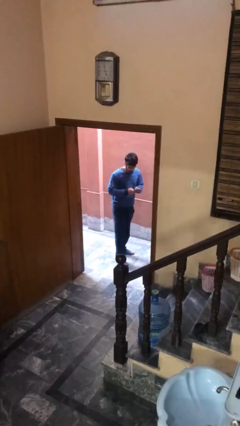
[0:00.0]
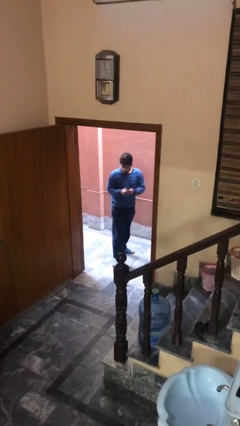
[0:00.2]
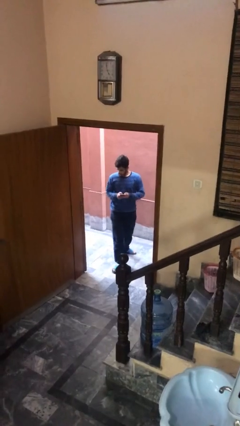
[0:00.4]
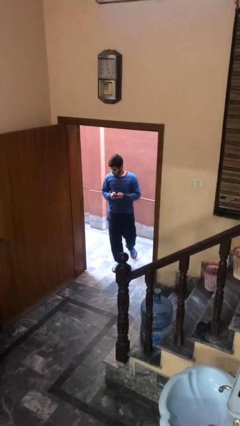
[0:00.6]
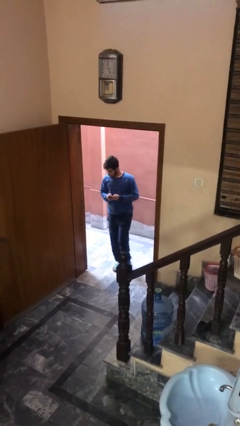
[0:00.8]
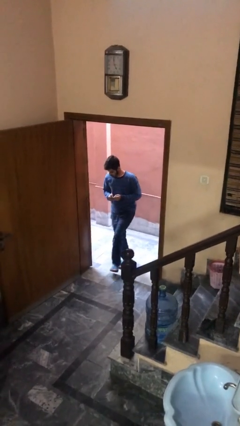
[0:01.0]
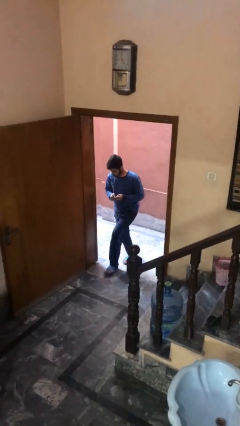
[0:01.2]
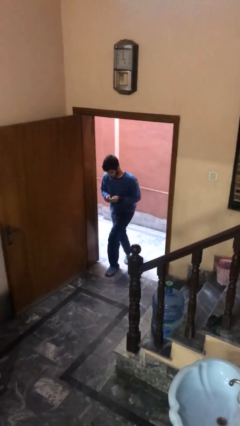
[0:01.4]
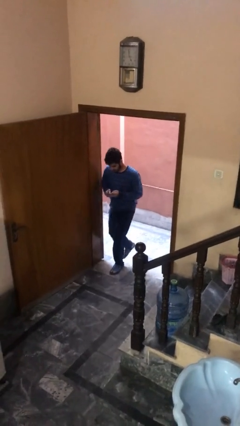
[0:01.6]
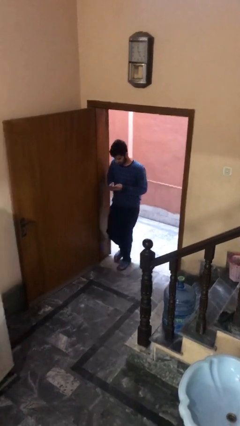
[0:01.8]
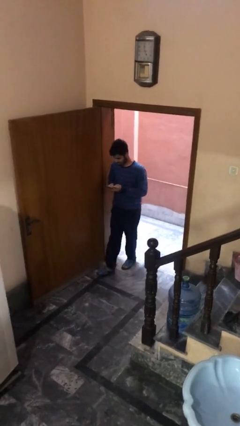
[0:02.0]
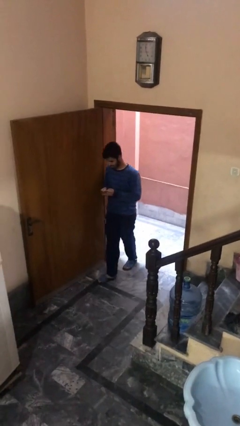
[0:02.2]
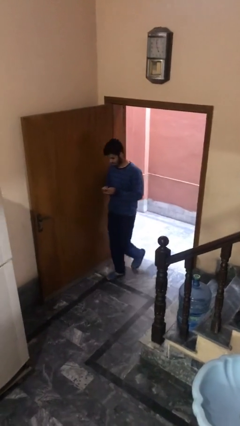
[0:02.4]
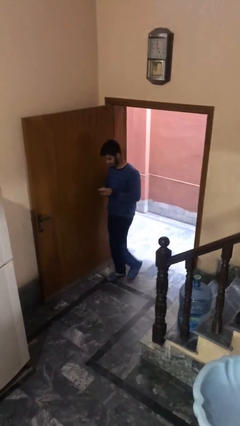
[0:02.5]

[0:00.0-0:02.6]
person enters scene through structure

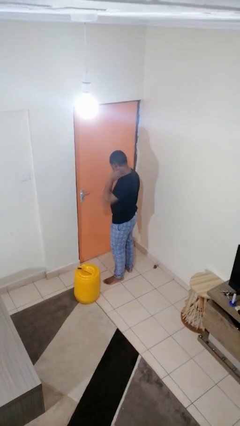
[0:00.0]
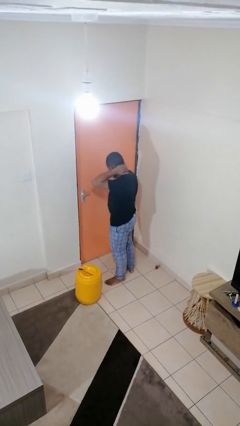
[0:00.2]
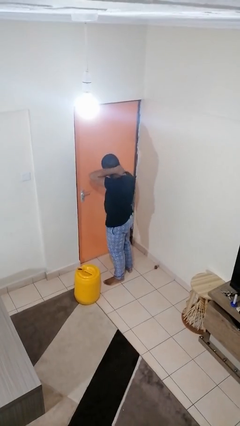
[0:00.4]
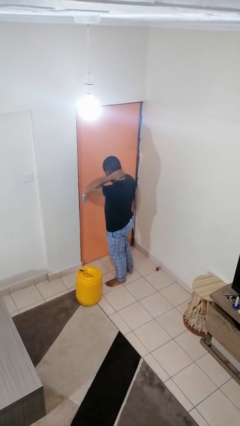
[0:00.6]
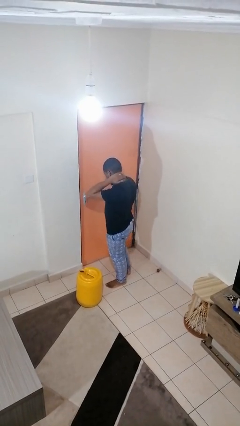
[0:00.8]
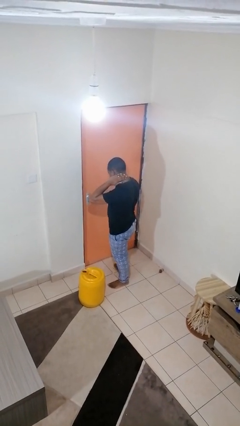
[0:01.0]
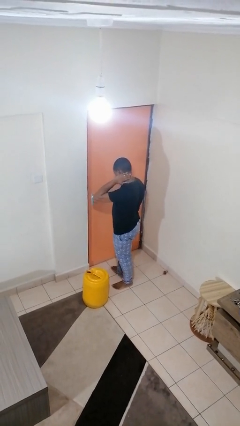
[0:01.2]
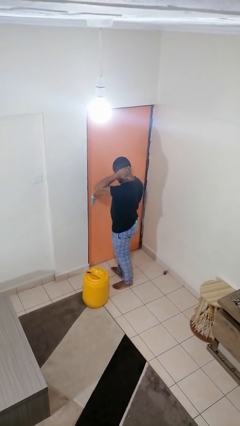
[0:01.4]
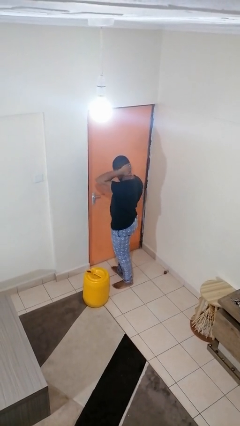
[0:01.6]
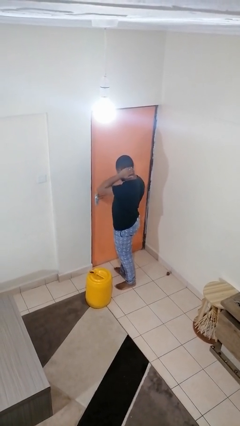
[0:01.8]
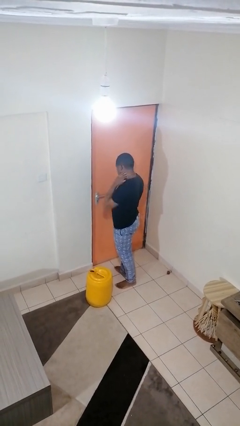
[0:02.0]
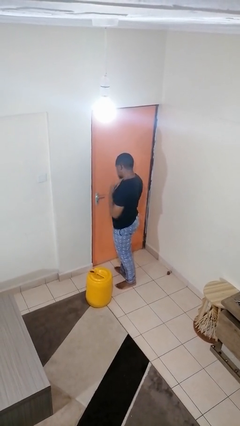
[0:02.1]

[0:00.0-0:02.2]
person rubs neck

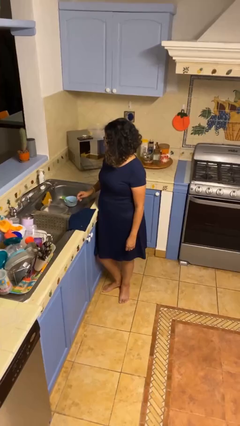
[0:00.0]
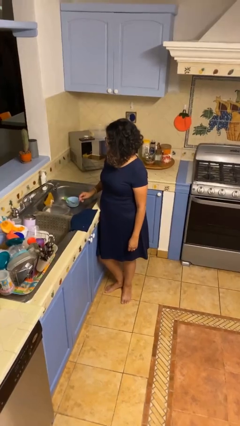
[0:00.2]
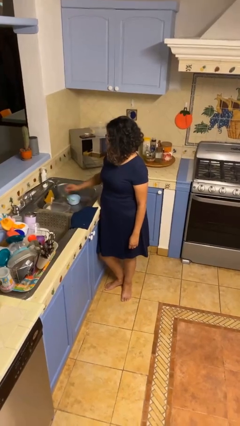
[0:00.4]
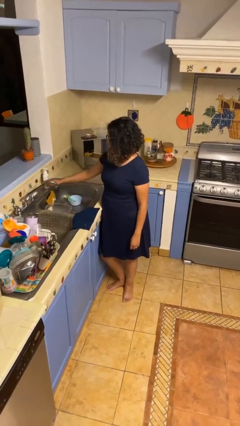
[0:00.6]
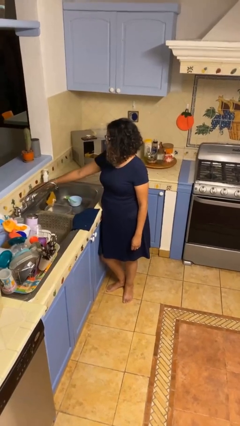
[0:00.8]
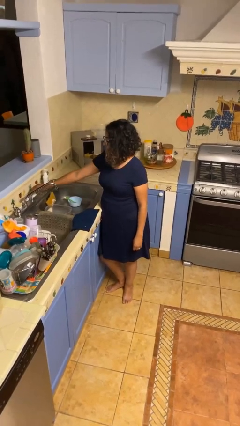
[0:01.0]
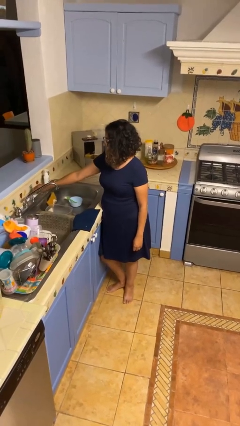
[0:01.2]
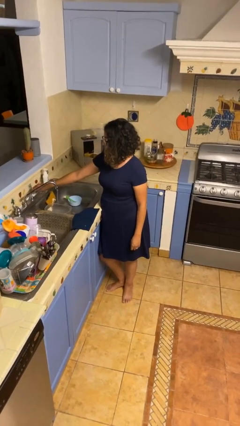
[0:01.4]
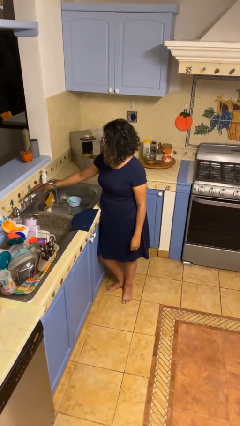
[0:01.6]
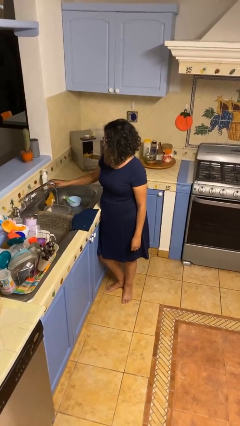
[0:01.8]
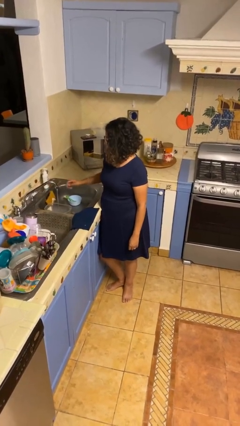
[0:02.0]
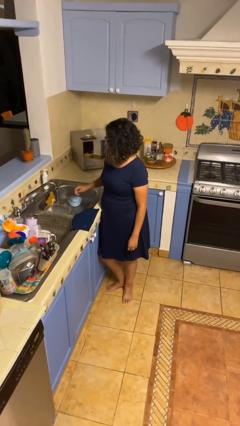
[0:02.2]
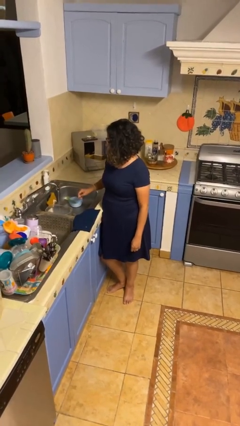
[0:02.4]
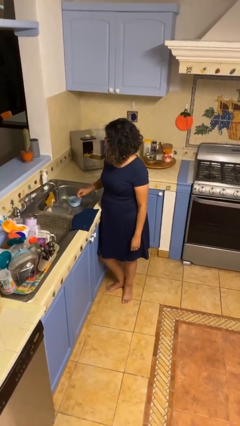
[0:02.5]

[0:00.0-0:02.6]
person turns on faucet

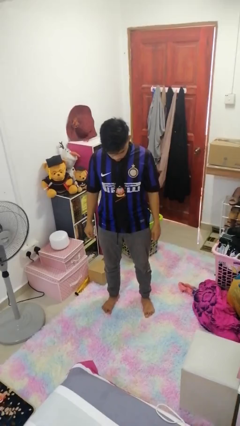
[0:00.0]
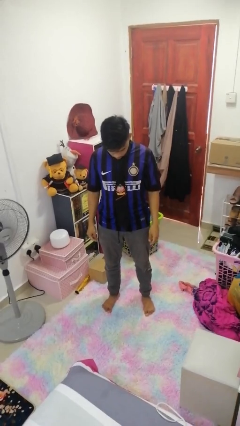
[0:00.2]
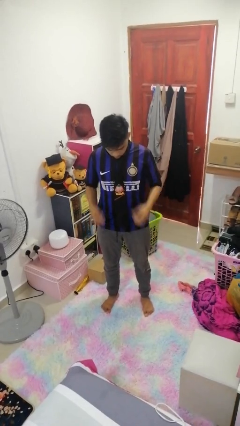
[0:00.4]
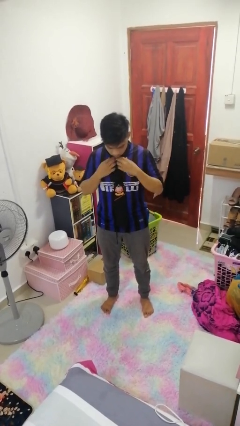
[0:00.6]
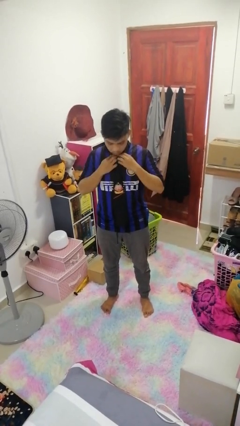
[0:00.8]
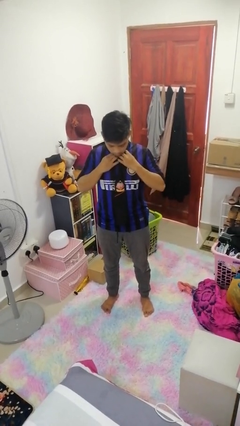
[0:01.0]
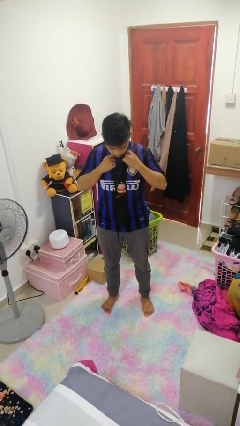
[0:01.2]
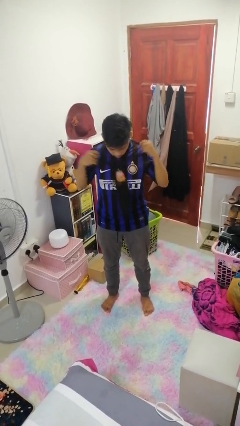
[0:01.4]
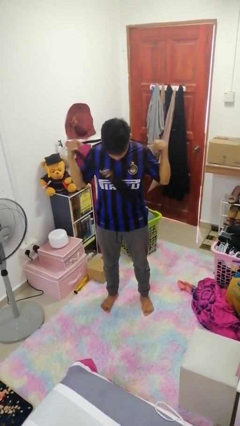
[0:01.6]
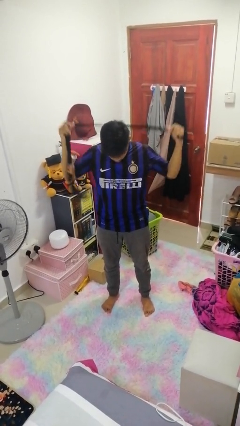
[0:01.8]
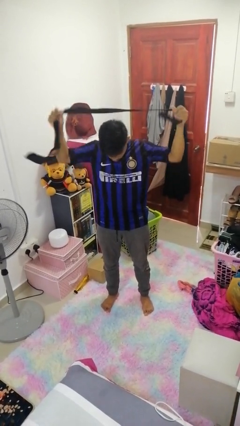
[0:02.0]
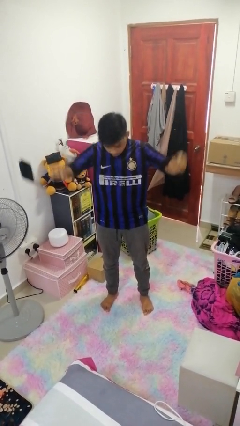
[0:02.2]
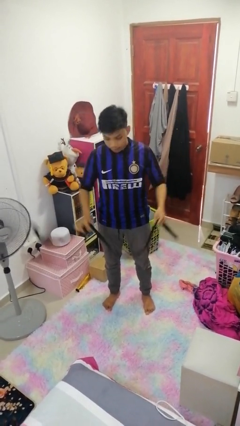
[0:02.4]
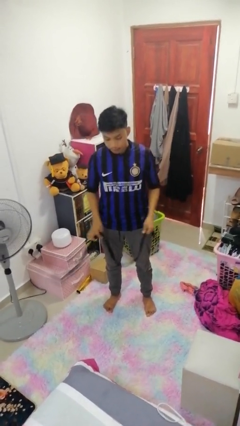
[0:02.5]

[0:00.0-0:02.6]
person takes off necktie

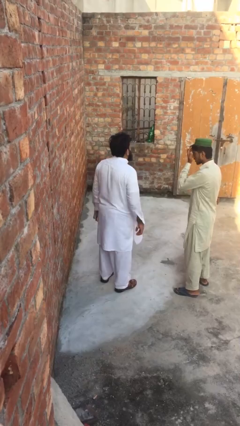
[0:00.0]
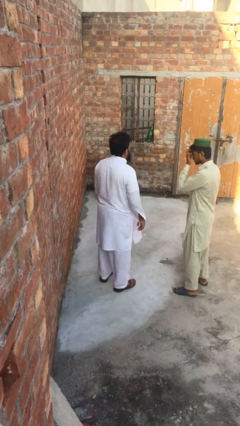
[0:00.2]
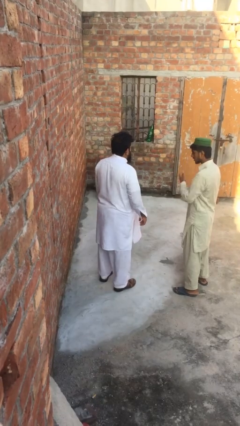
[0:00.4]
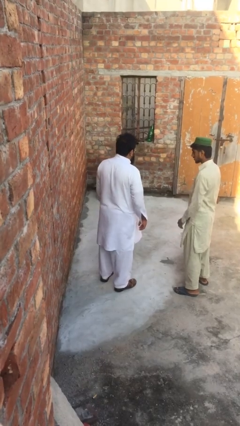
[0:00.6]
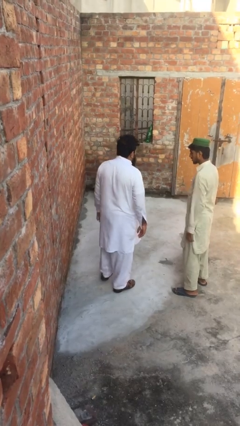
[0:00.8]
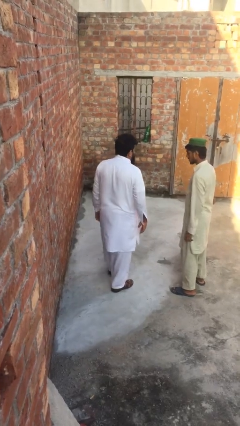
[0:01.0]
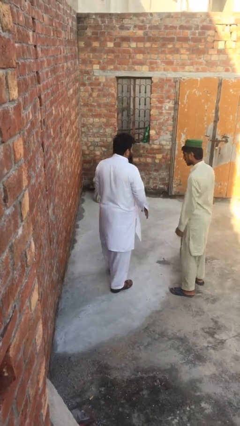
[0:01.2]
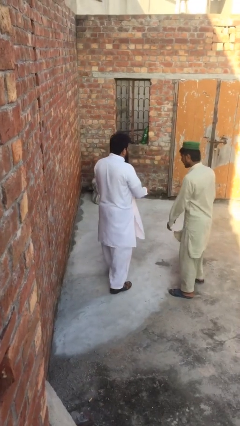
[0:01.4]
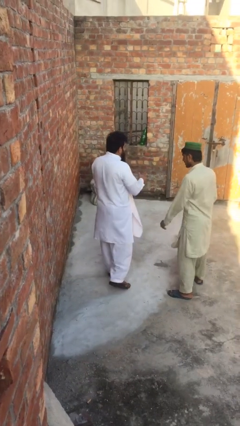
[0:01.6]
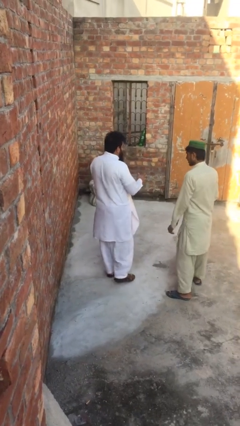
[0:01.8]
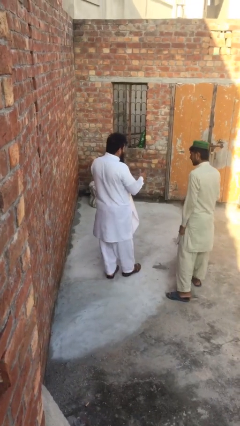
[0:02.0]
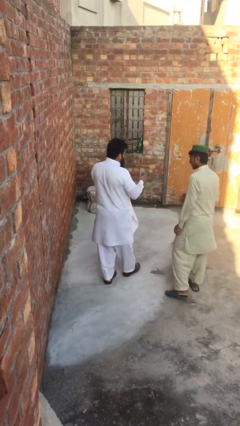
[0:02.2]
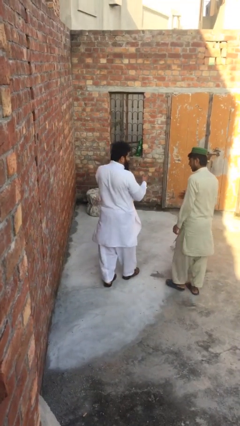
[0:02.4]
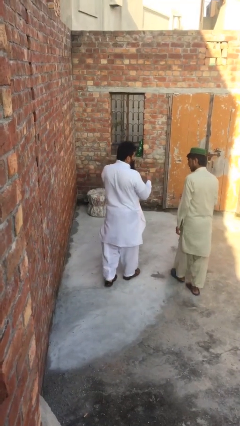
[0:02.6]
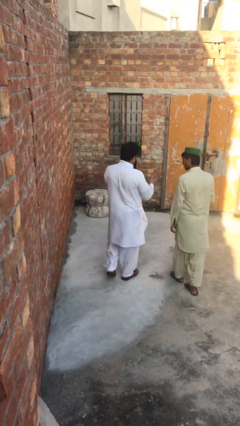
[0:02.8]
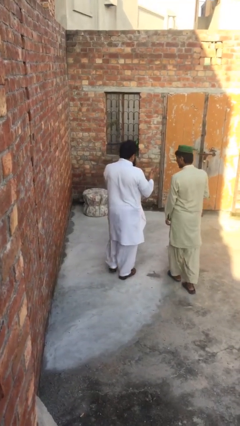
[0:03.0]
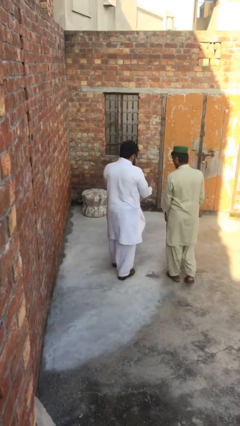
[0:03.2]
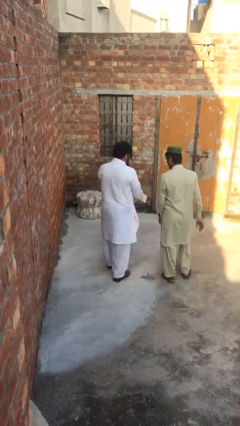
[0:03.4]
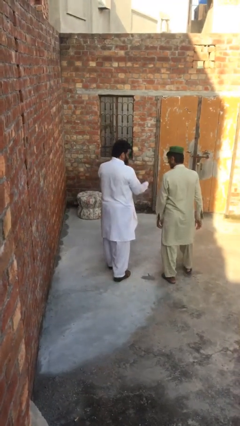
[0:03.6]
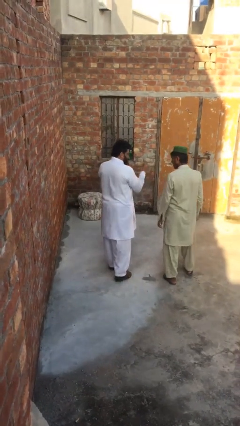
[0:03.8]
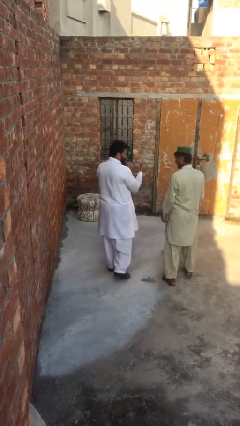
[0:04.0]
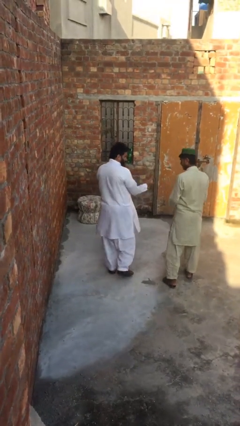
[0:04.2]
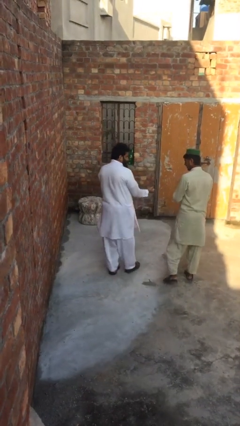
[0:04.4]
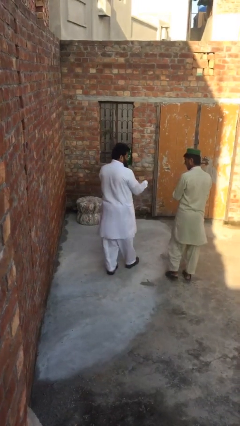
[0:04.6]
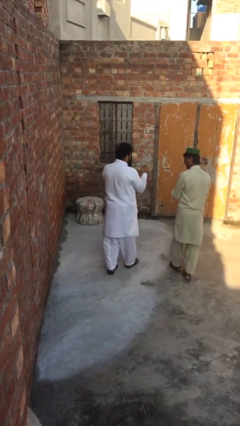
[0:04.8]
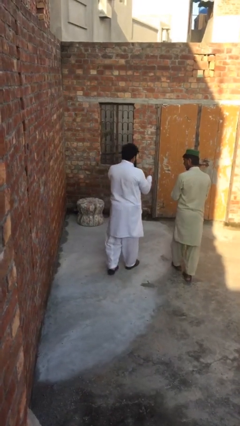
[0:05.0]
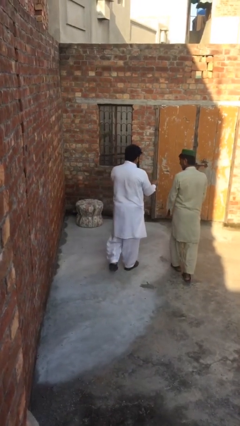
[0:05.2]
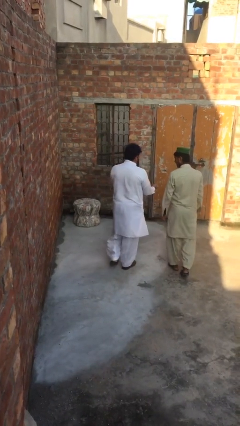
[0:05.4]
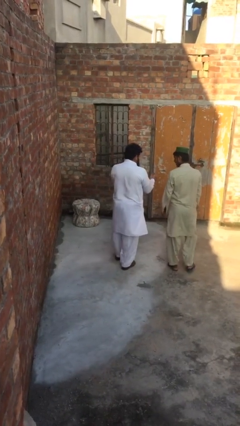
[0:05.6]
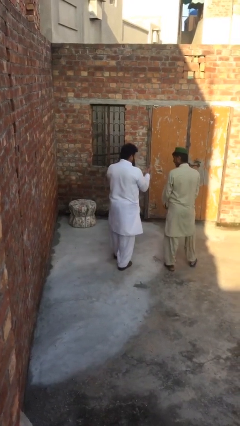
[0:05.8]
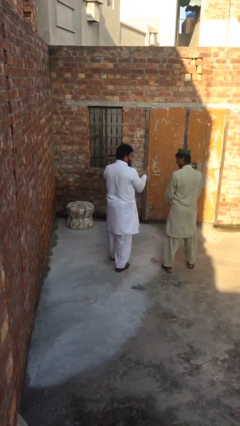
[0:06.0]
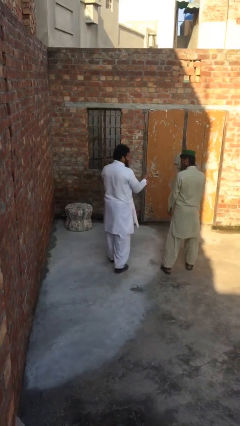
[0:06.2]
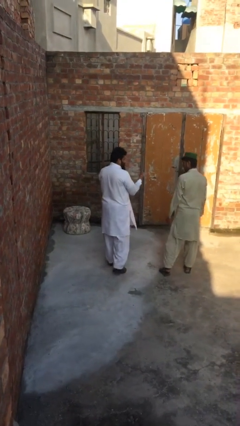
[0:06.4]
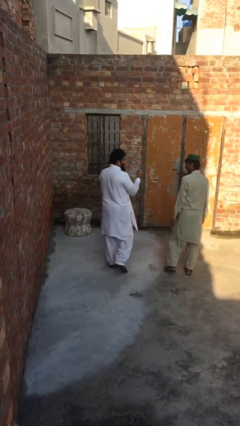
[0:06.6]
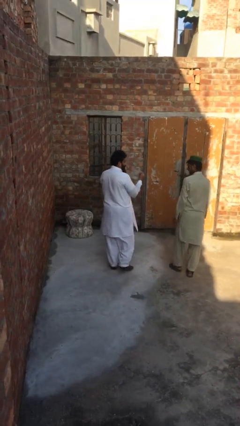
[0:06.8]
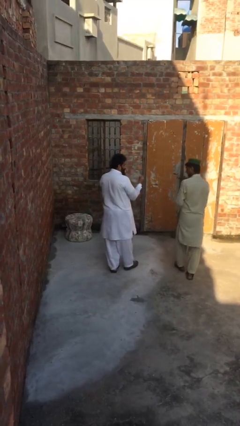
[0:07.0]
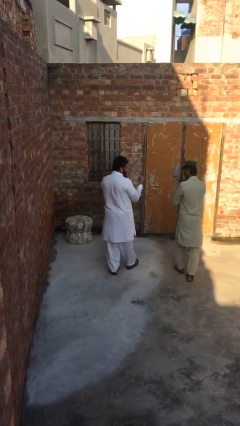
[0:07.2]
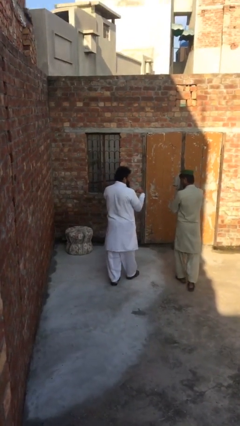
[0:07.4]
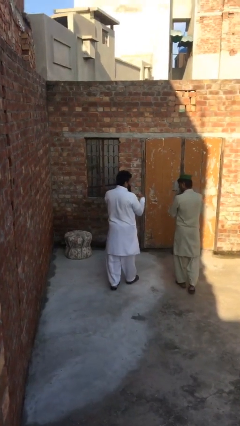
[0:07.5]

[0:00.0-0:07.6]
person talks to person
